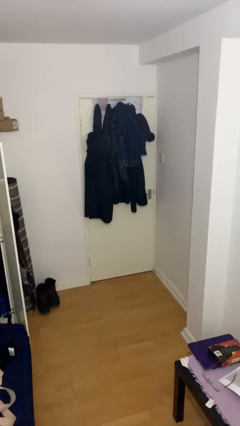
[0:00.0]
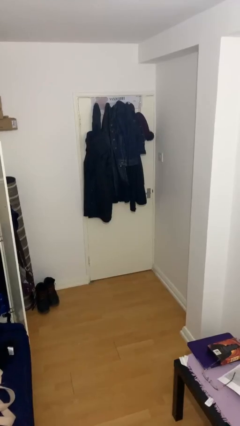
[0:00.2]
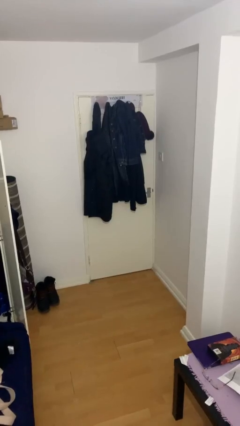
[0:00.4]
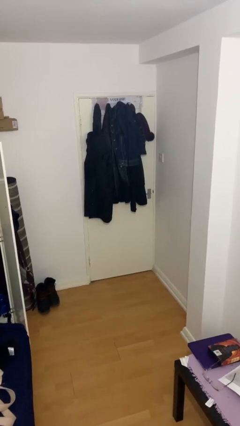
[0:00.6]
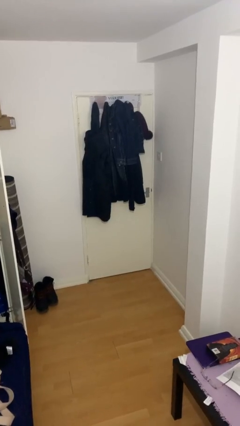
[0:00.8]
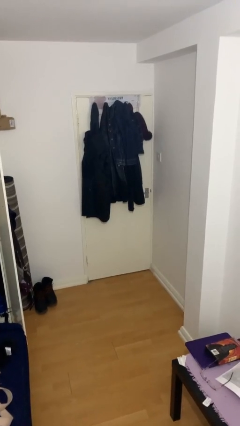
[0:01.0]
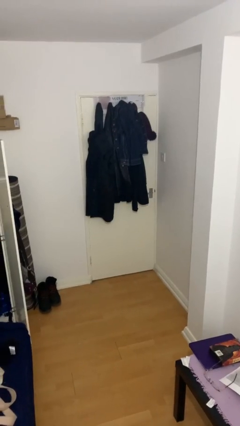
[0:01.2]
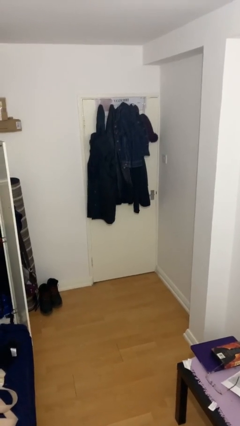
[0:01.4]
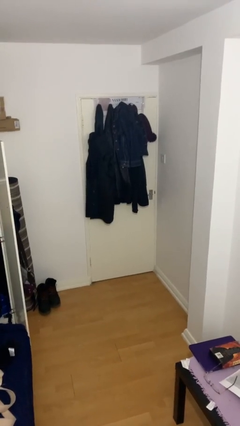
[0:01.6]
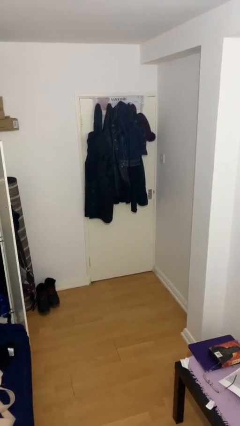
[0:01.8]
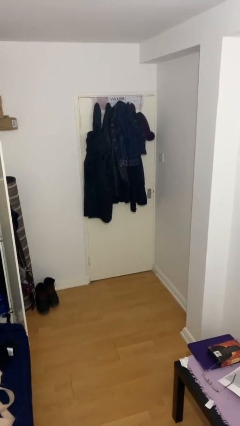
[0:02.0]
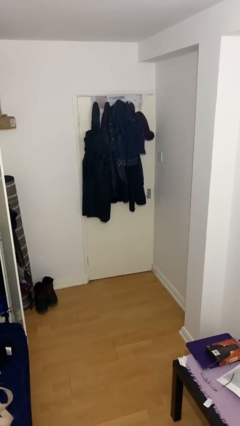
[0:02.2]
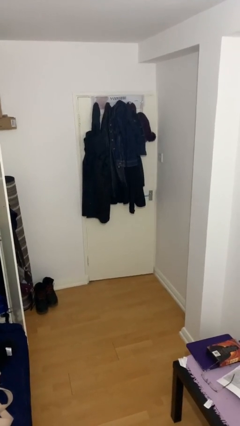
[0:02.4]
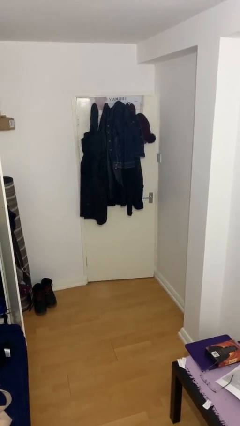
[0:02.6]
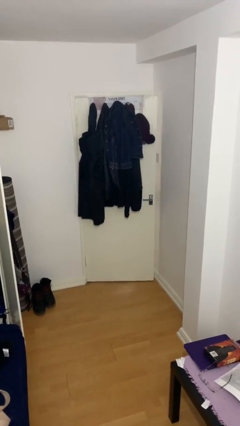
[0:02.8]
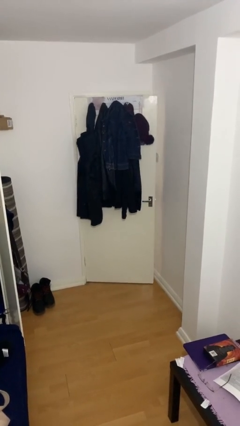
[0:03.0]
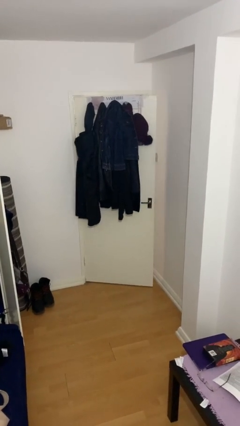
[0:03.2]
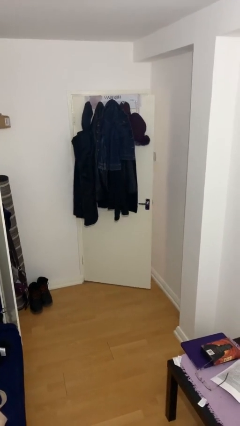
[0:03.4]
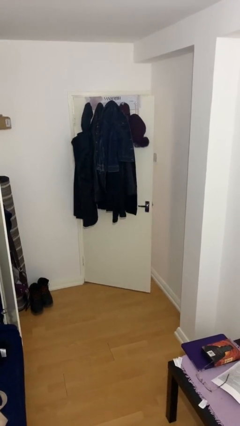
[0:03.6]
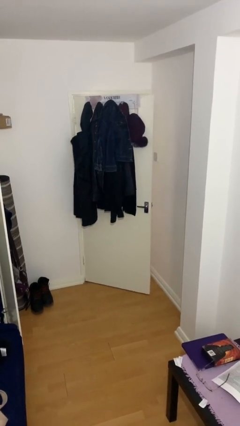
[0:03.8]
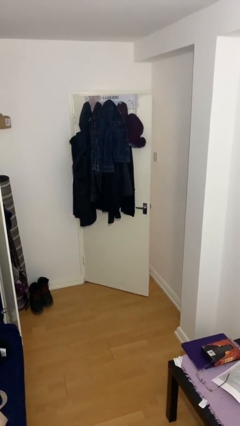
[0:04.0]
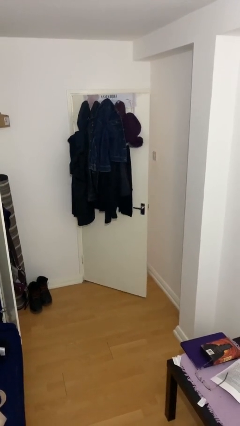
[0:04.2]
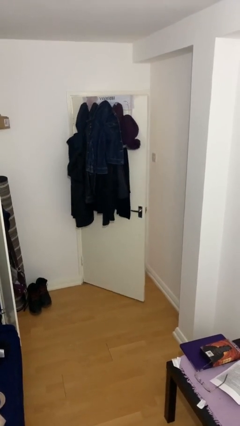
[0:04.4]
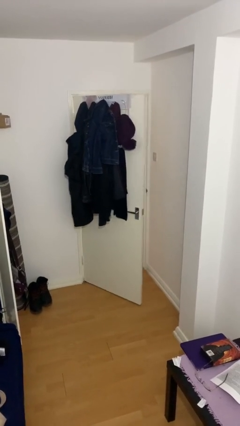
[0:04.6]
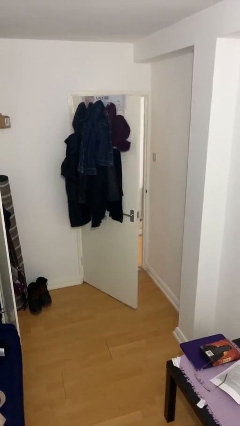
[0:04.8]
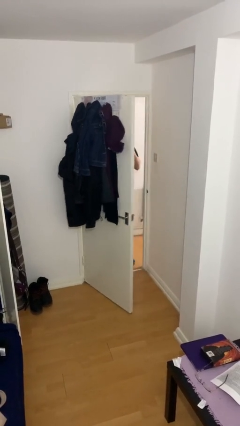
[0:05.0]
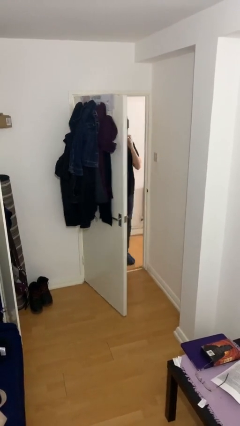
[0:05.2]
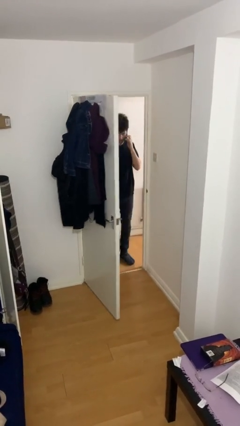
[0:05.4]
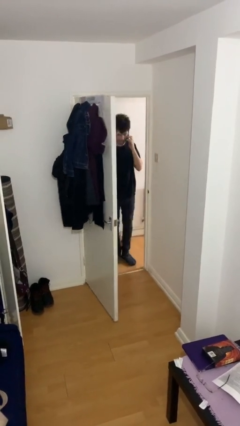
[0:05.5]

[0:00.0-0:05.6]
person opens facility door

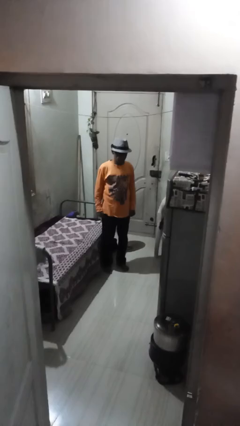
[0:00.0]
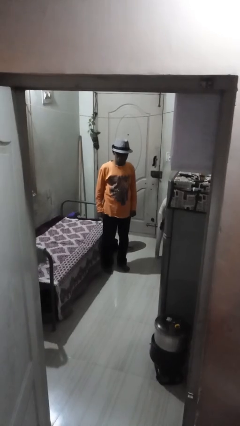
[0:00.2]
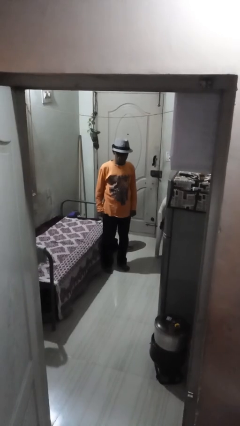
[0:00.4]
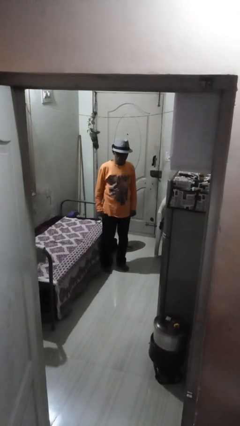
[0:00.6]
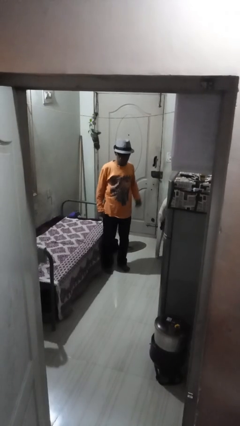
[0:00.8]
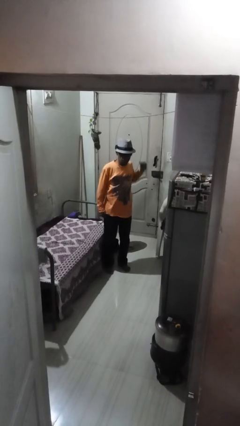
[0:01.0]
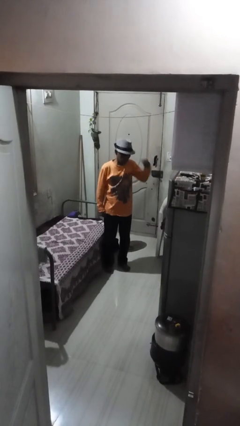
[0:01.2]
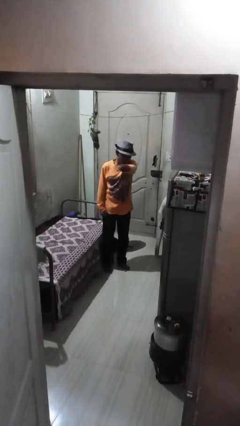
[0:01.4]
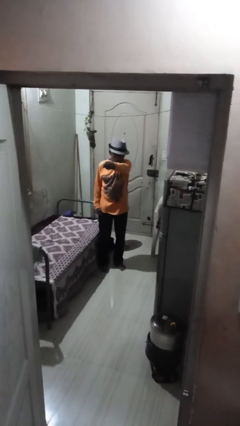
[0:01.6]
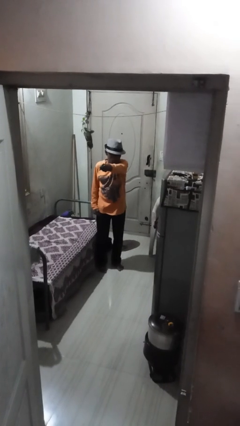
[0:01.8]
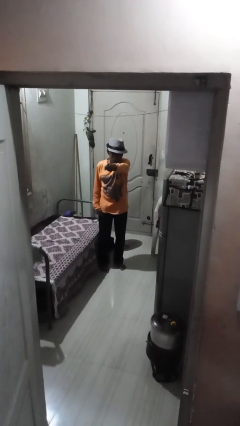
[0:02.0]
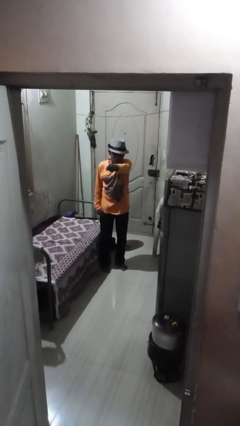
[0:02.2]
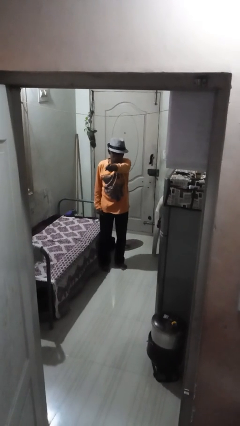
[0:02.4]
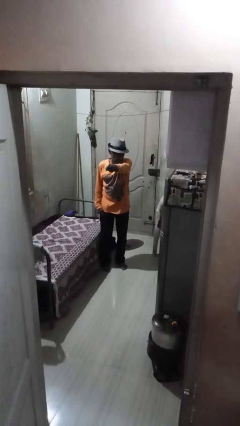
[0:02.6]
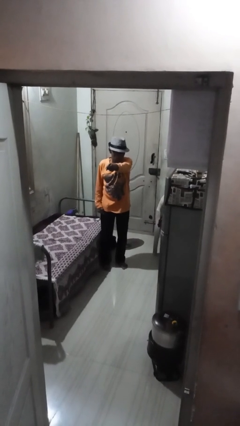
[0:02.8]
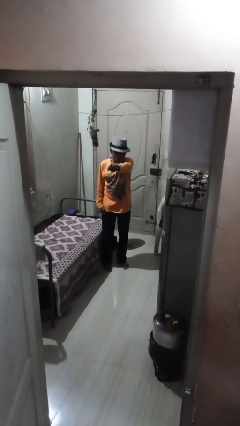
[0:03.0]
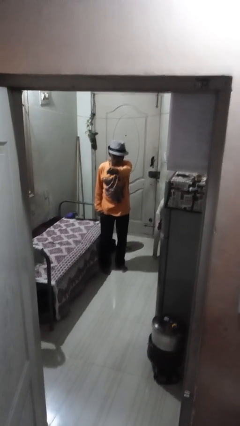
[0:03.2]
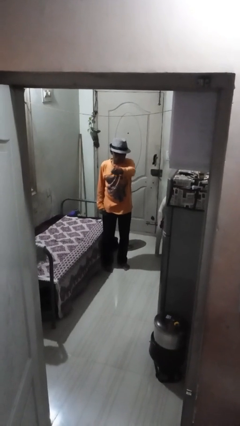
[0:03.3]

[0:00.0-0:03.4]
person punches

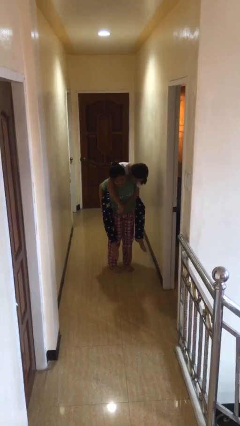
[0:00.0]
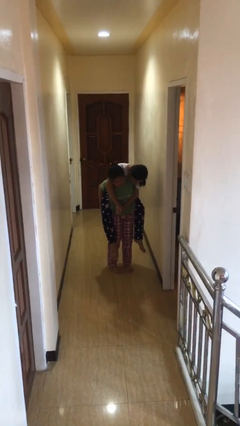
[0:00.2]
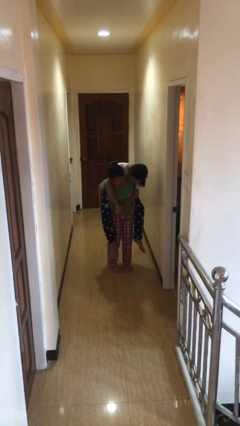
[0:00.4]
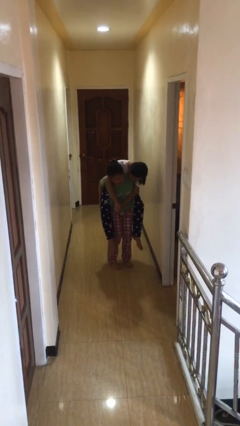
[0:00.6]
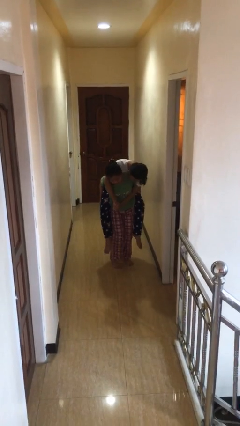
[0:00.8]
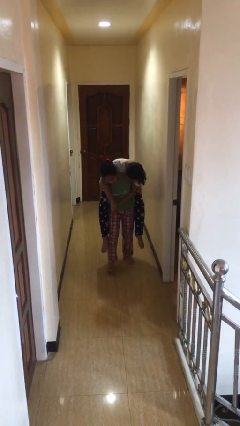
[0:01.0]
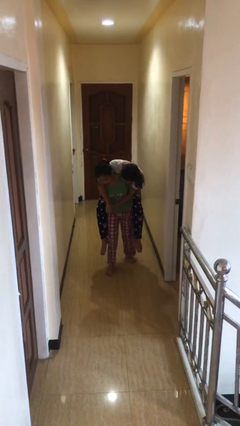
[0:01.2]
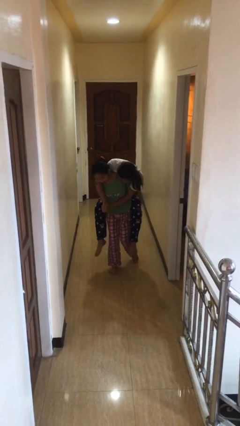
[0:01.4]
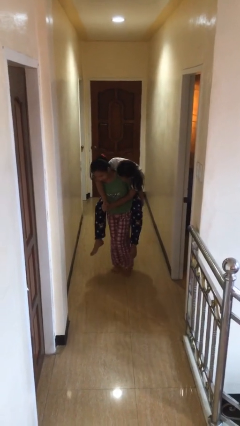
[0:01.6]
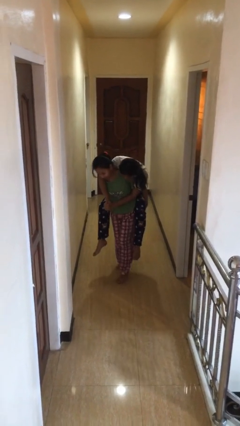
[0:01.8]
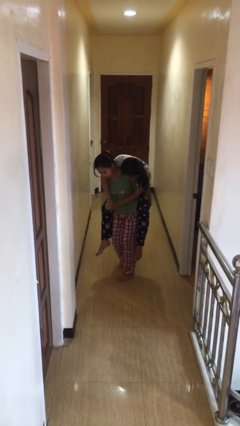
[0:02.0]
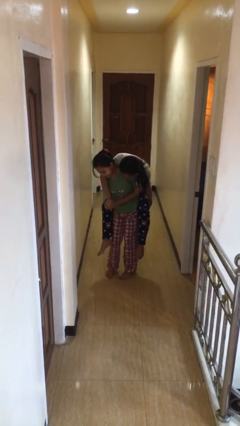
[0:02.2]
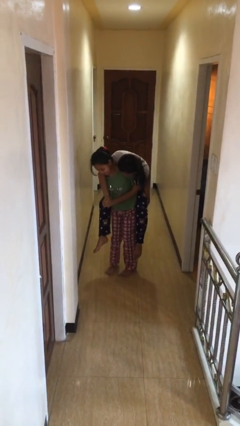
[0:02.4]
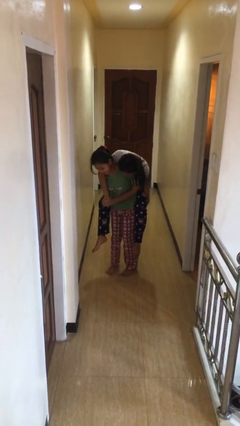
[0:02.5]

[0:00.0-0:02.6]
person carries person on back

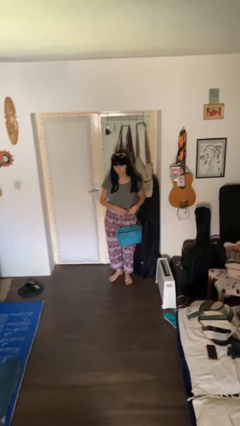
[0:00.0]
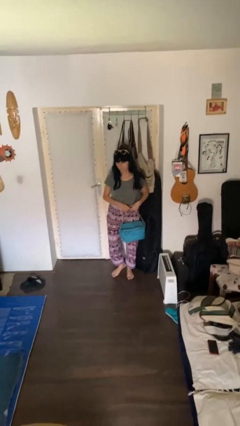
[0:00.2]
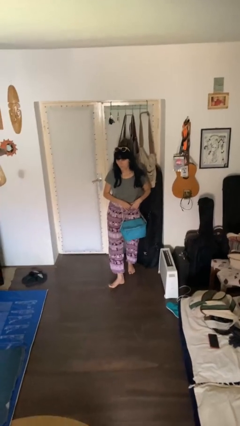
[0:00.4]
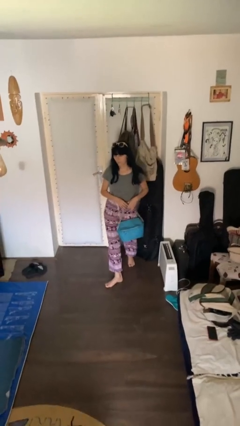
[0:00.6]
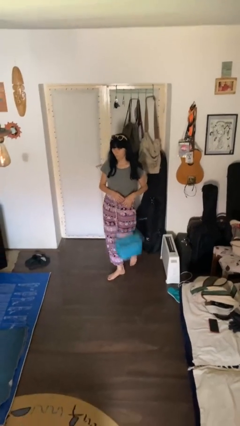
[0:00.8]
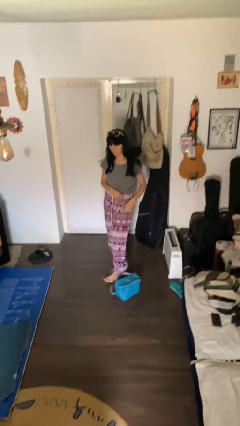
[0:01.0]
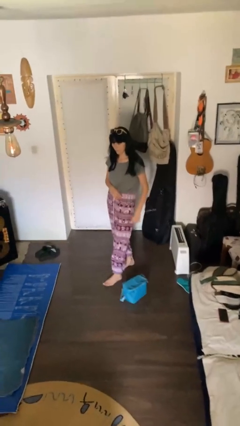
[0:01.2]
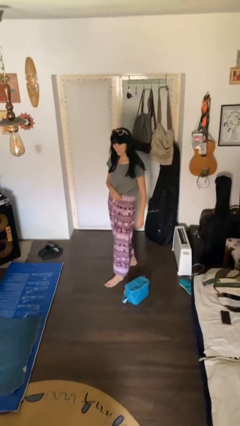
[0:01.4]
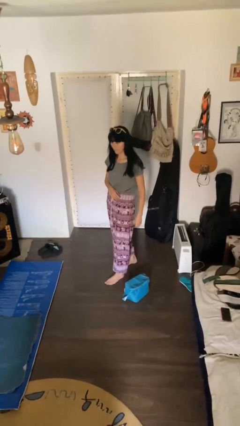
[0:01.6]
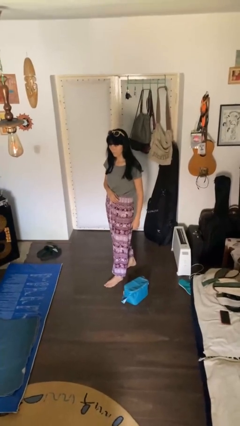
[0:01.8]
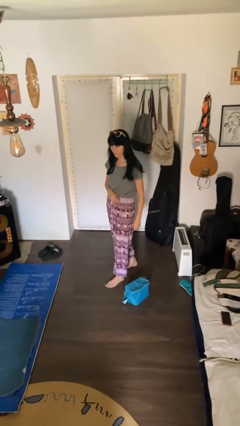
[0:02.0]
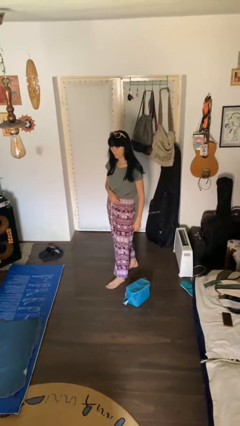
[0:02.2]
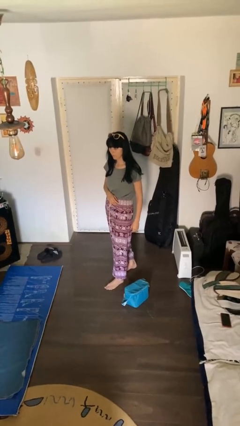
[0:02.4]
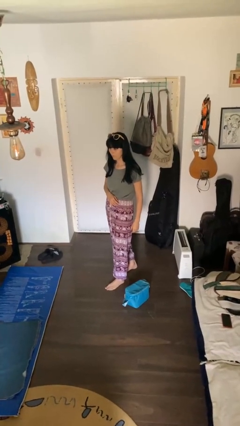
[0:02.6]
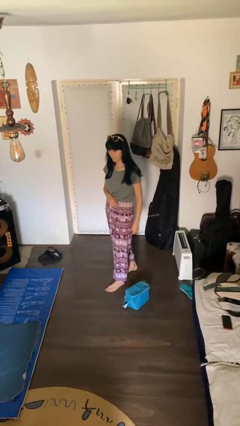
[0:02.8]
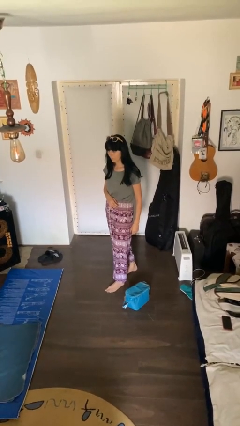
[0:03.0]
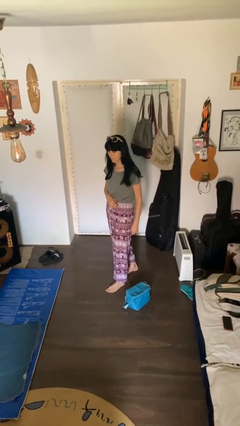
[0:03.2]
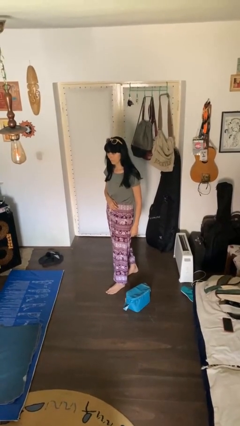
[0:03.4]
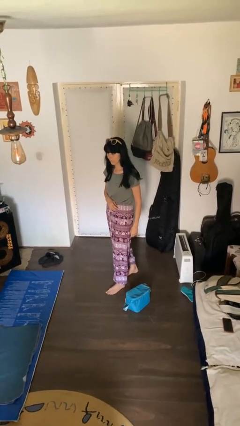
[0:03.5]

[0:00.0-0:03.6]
person drops object

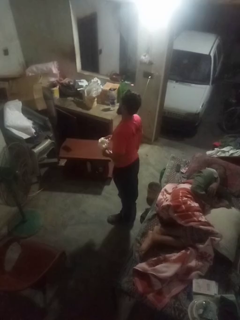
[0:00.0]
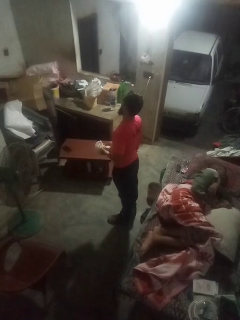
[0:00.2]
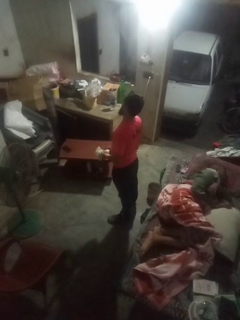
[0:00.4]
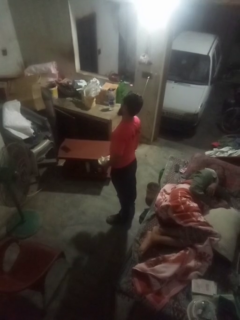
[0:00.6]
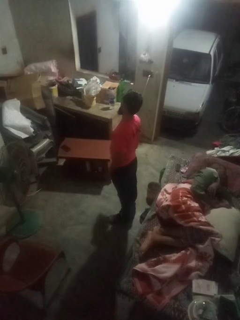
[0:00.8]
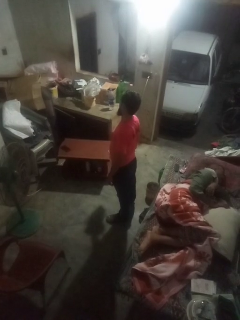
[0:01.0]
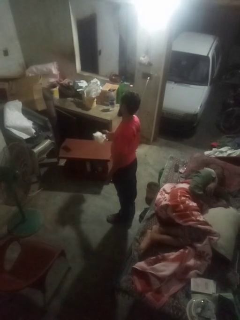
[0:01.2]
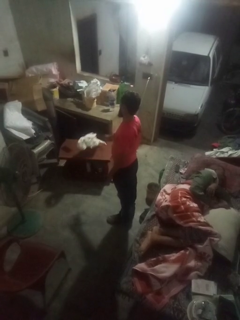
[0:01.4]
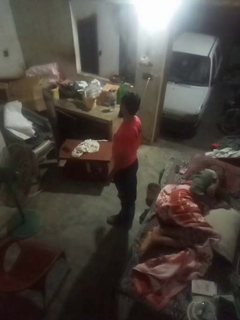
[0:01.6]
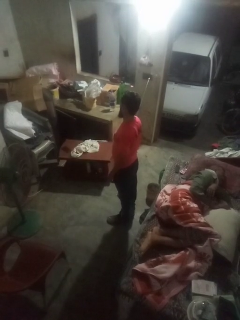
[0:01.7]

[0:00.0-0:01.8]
person throws object on table

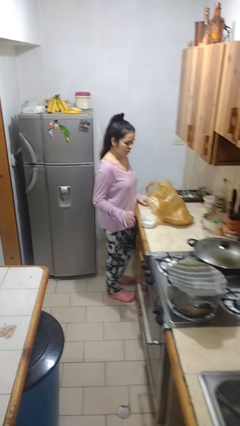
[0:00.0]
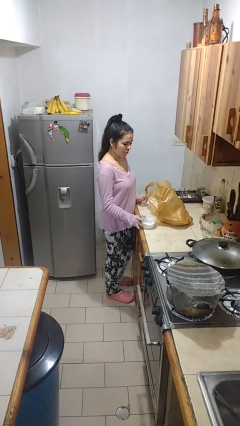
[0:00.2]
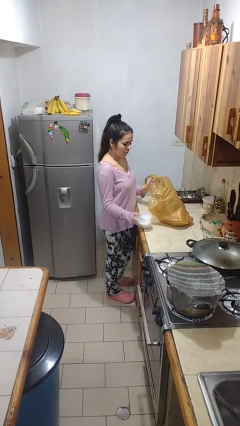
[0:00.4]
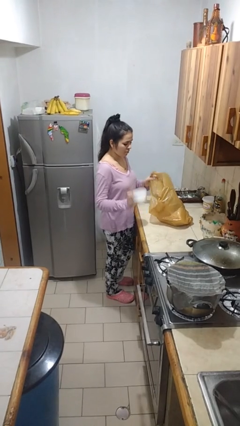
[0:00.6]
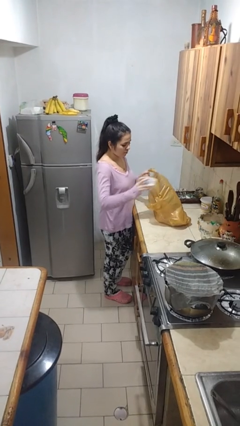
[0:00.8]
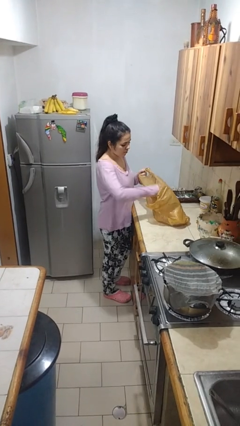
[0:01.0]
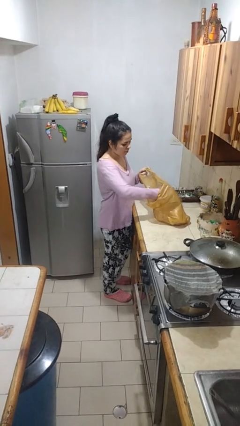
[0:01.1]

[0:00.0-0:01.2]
person puts object into bag
